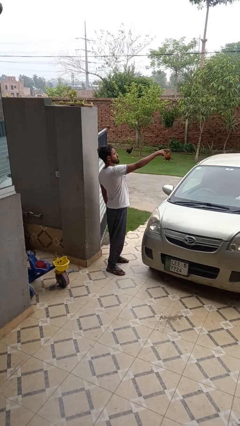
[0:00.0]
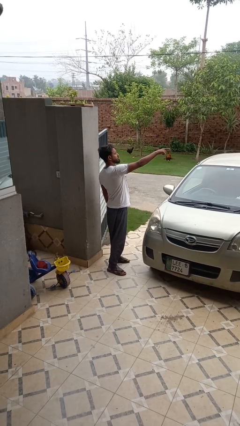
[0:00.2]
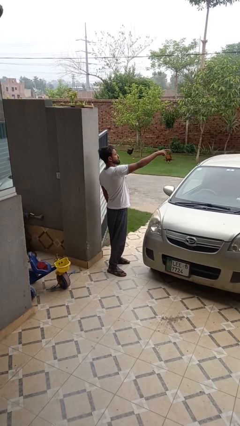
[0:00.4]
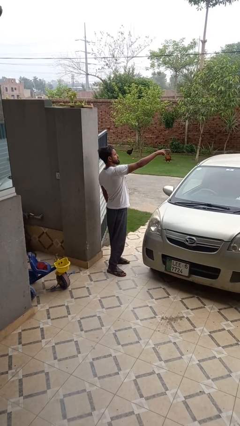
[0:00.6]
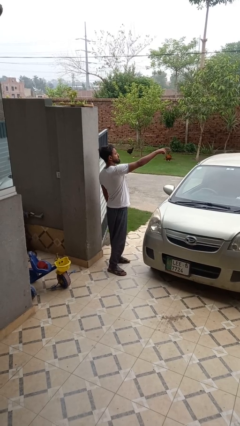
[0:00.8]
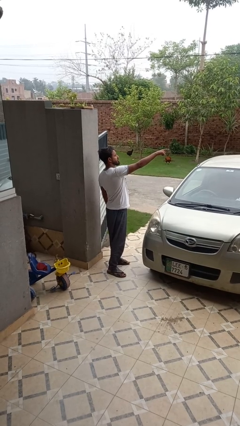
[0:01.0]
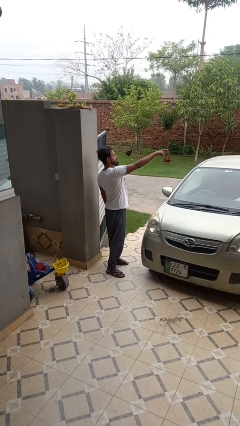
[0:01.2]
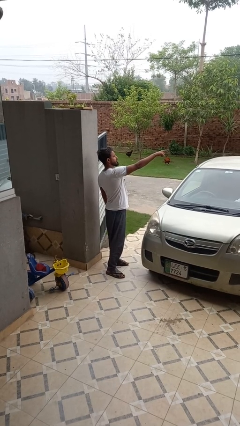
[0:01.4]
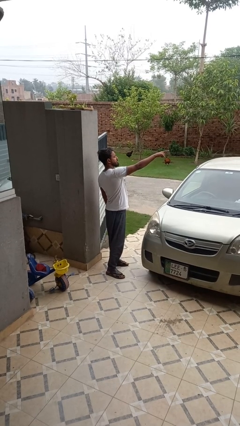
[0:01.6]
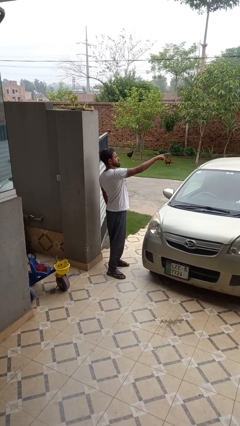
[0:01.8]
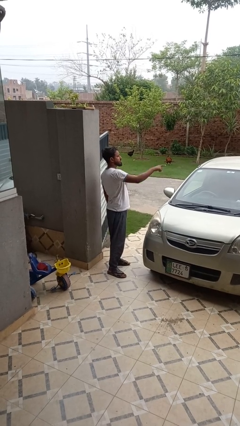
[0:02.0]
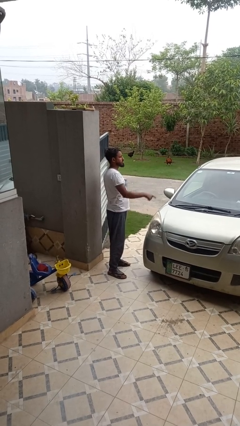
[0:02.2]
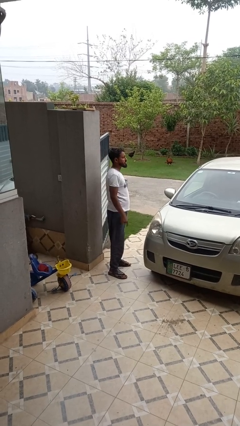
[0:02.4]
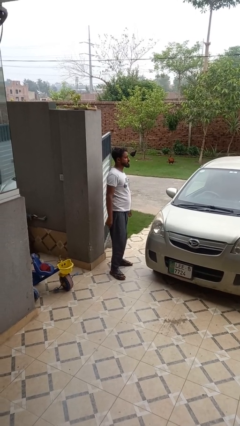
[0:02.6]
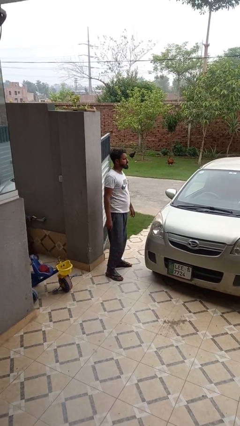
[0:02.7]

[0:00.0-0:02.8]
person points at person

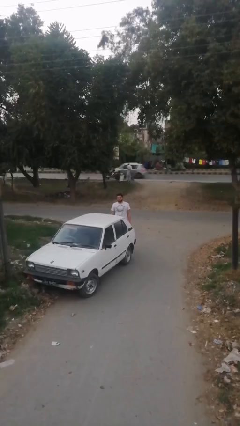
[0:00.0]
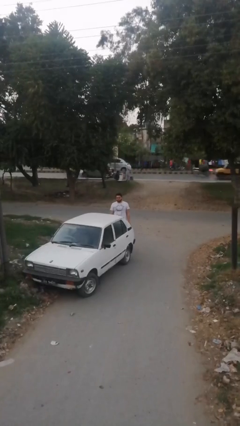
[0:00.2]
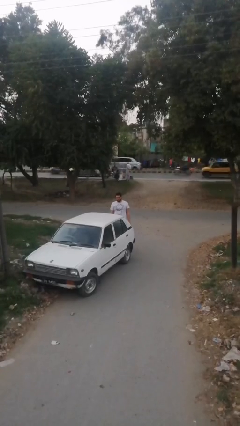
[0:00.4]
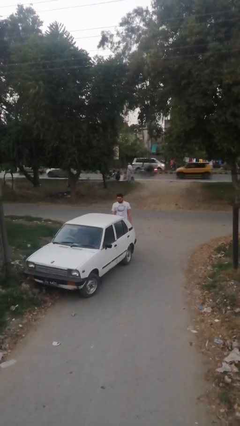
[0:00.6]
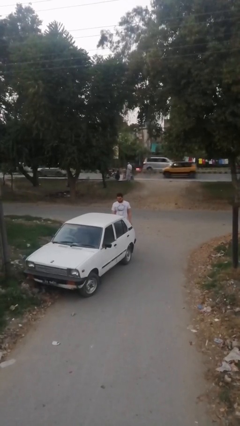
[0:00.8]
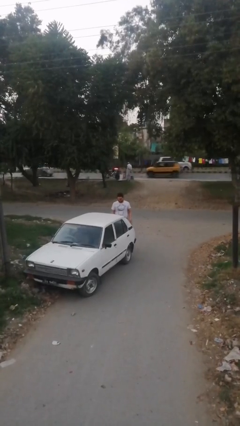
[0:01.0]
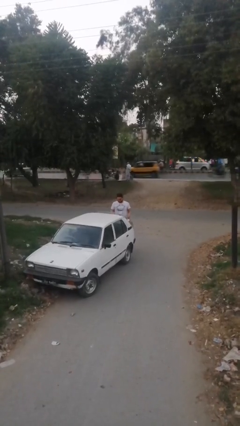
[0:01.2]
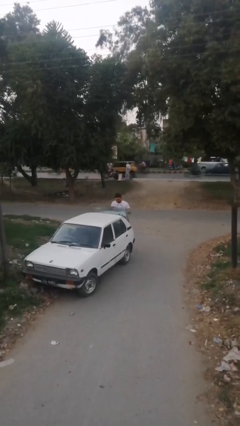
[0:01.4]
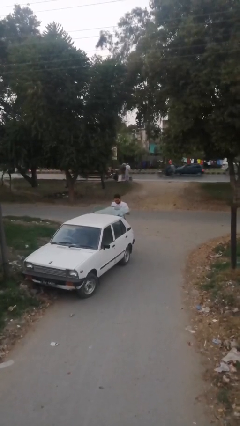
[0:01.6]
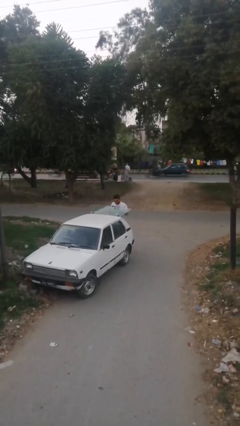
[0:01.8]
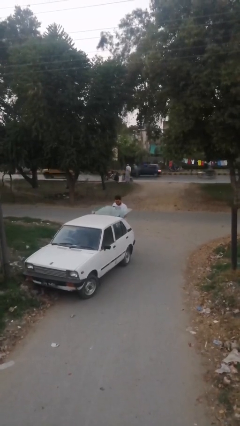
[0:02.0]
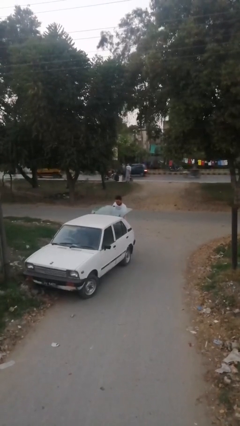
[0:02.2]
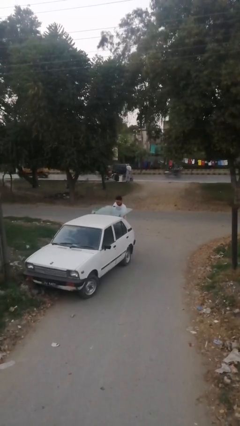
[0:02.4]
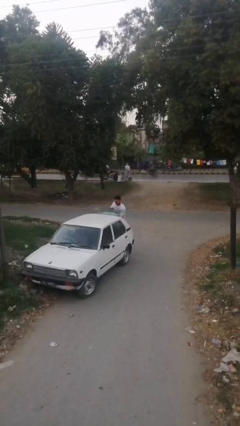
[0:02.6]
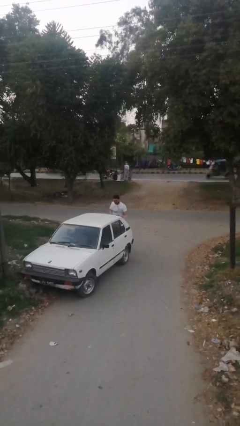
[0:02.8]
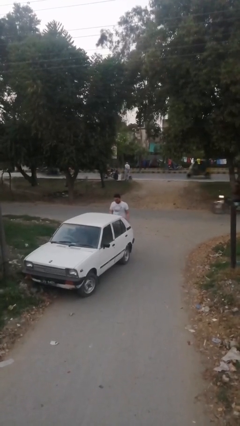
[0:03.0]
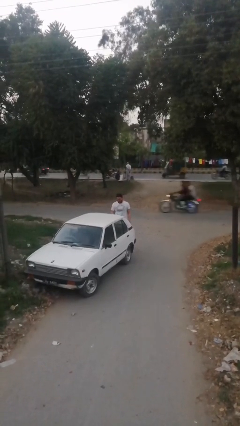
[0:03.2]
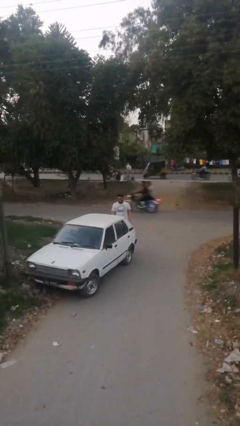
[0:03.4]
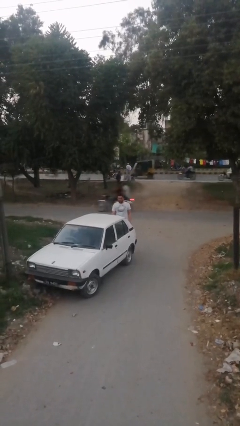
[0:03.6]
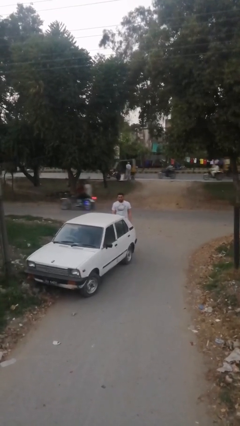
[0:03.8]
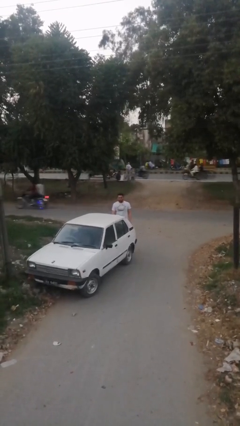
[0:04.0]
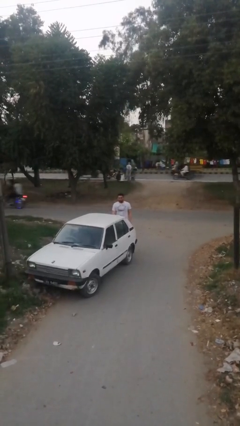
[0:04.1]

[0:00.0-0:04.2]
person loads car

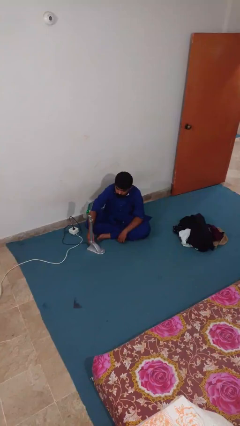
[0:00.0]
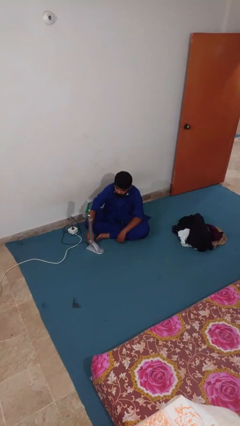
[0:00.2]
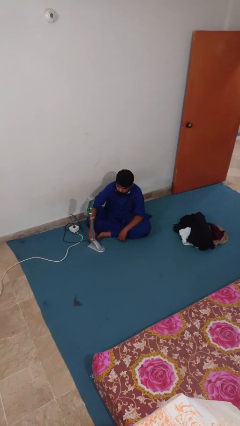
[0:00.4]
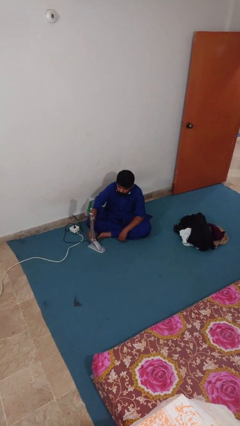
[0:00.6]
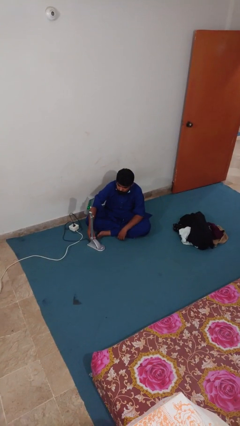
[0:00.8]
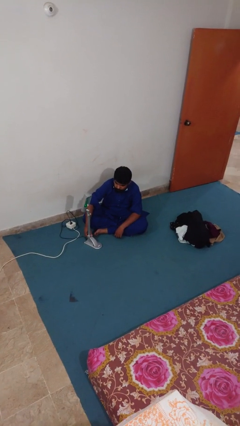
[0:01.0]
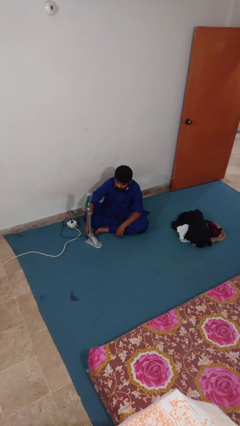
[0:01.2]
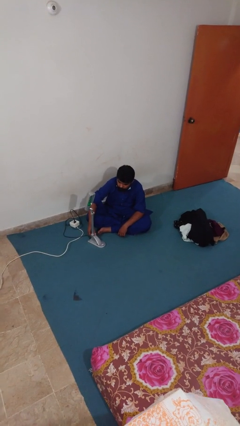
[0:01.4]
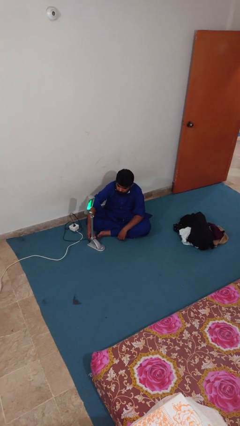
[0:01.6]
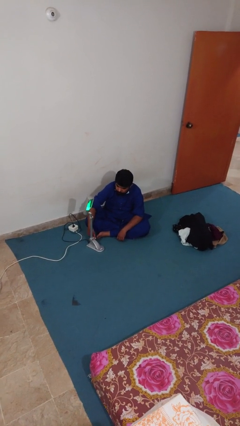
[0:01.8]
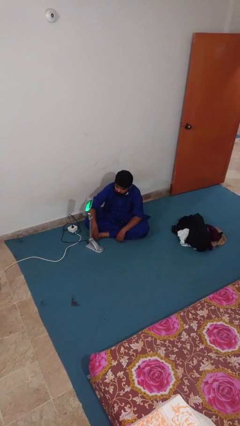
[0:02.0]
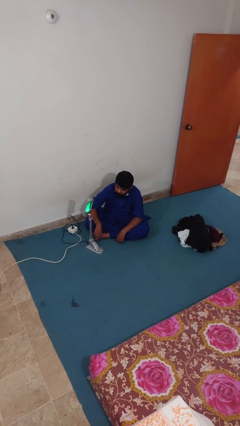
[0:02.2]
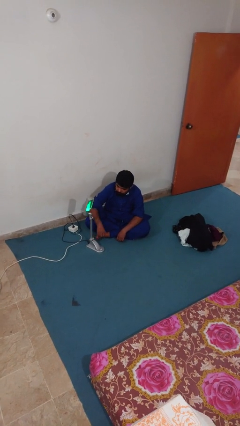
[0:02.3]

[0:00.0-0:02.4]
person turns on lamp

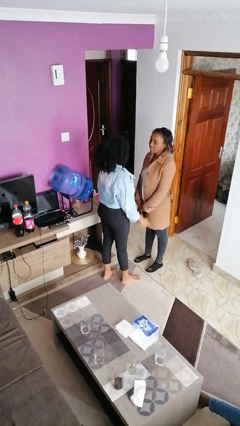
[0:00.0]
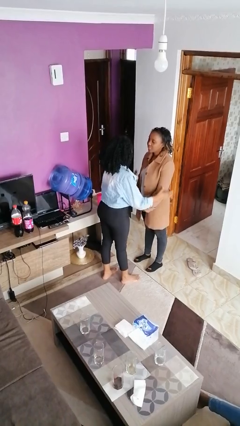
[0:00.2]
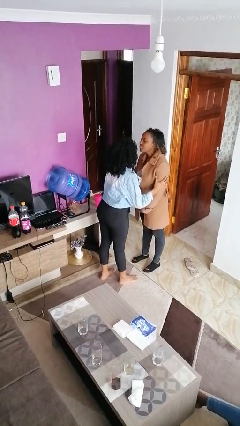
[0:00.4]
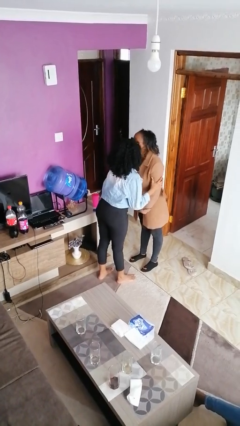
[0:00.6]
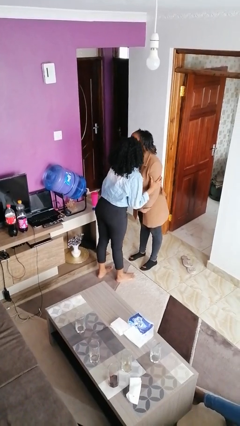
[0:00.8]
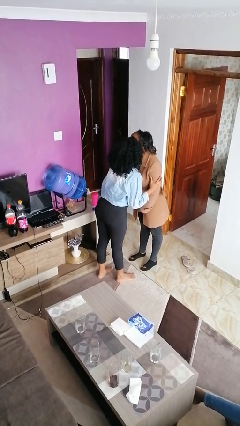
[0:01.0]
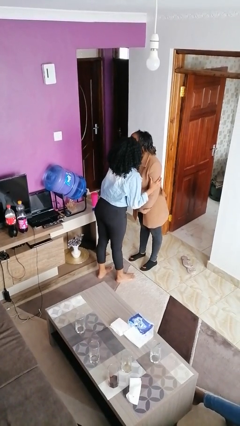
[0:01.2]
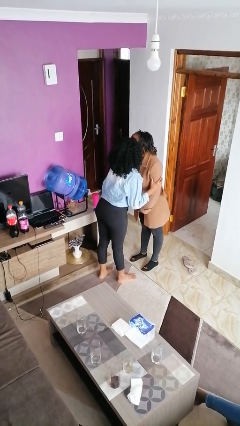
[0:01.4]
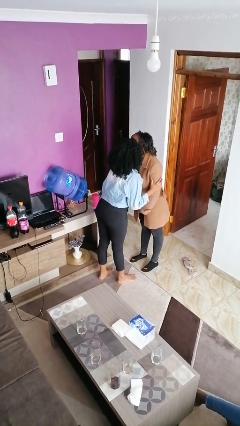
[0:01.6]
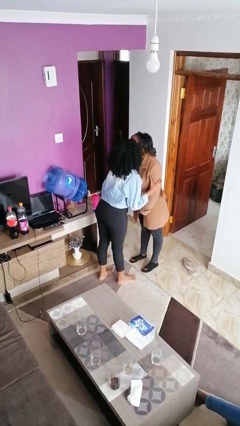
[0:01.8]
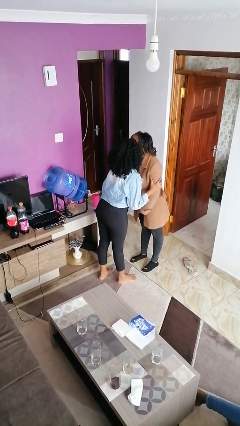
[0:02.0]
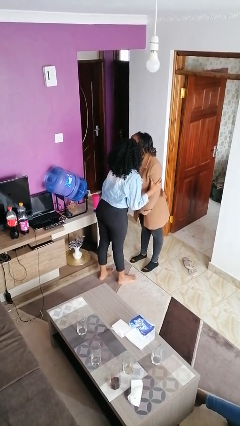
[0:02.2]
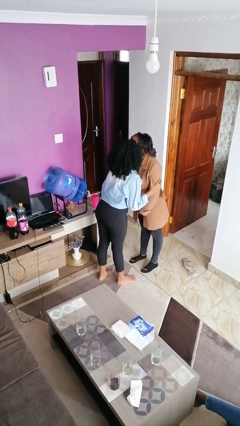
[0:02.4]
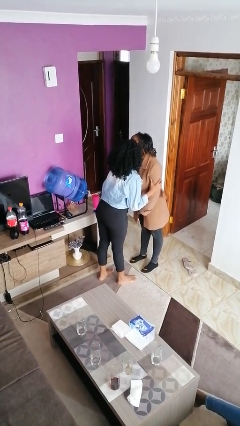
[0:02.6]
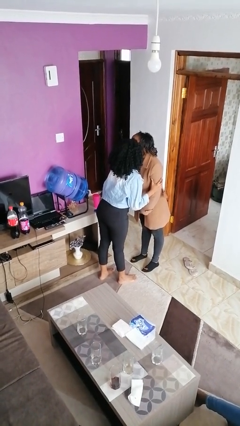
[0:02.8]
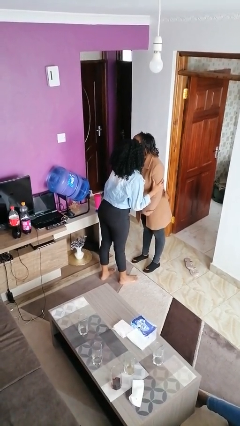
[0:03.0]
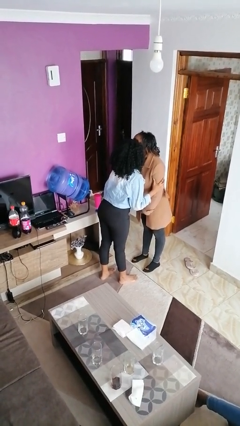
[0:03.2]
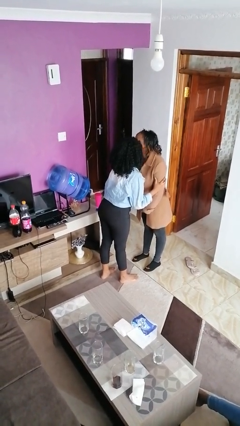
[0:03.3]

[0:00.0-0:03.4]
person kisses cheek of person

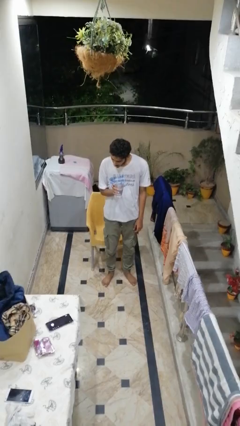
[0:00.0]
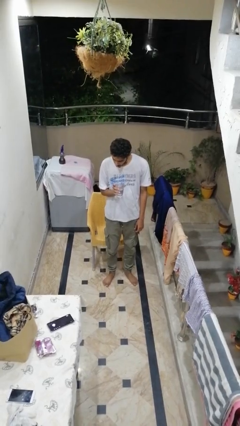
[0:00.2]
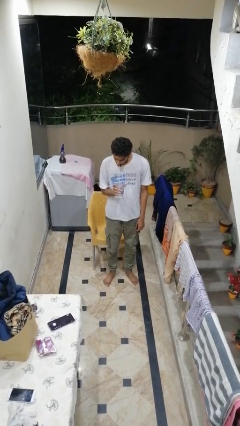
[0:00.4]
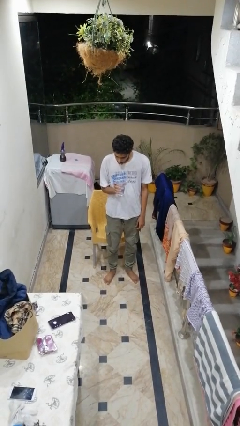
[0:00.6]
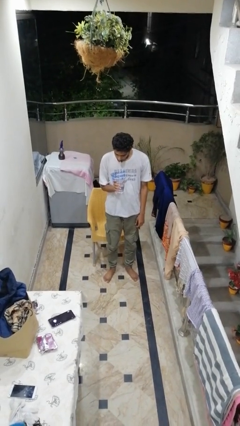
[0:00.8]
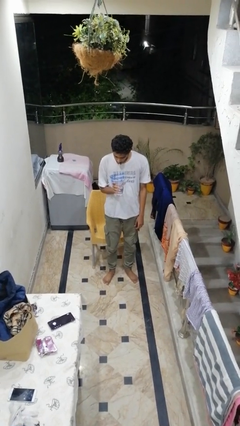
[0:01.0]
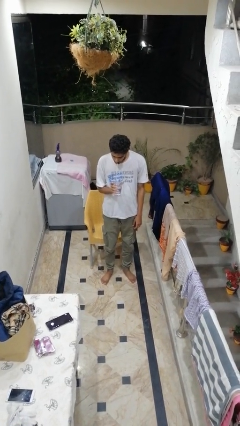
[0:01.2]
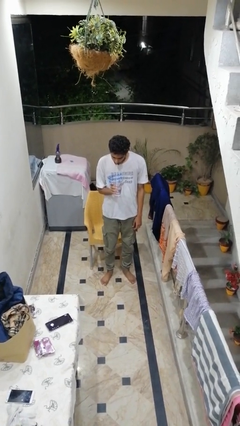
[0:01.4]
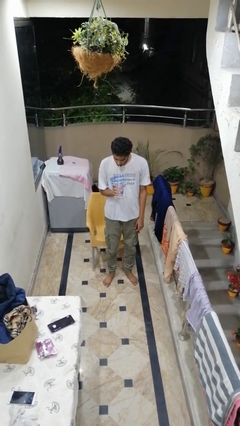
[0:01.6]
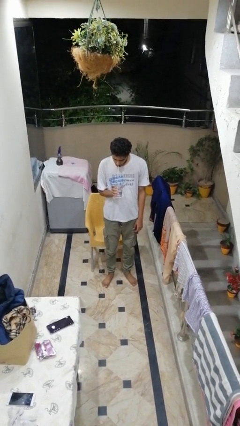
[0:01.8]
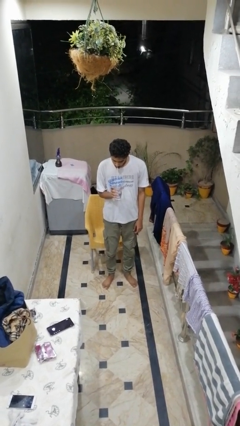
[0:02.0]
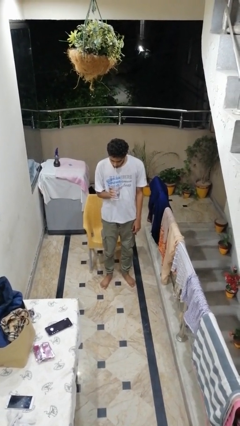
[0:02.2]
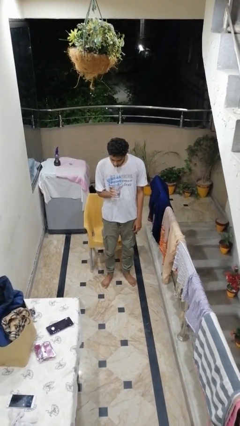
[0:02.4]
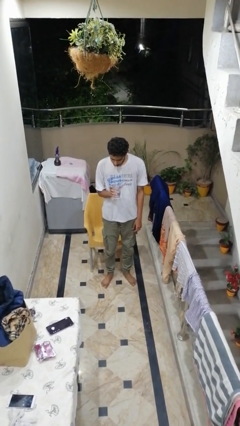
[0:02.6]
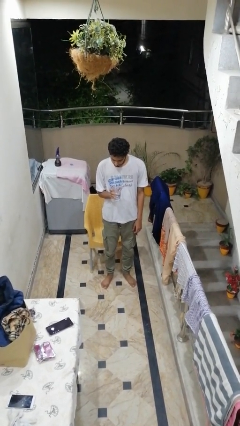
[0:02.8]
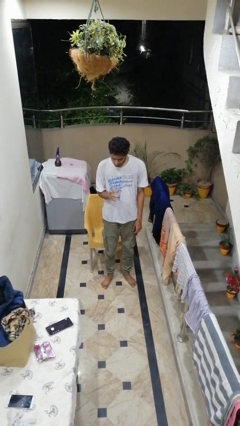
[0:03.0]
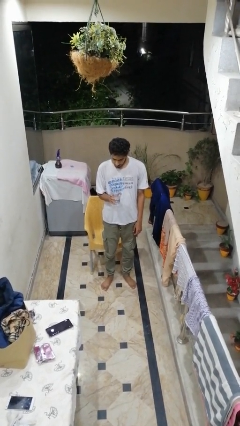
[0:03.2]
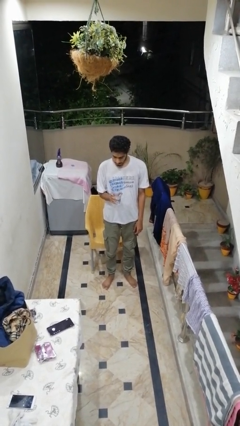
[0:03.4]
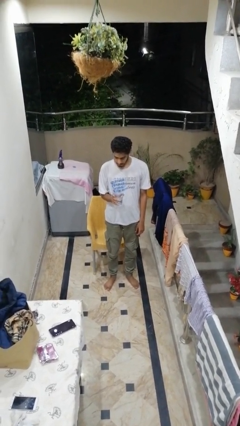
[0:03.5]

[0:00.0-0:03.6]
person drinks from straw

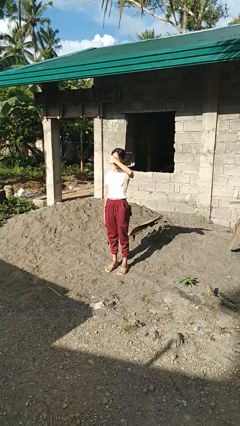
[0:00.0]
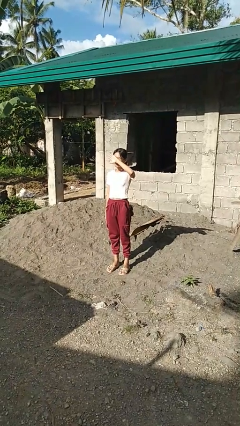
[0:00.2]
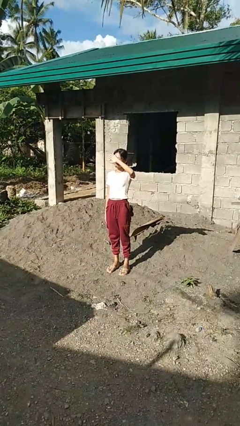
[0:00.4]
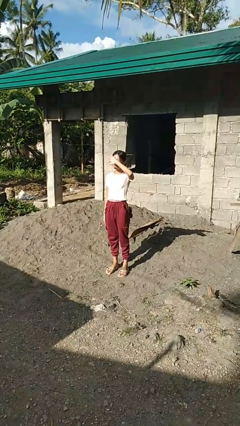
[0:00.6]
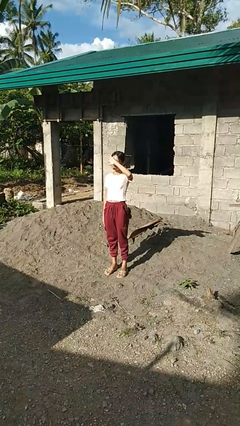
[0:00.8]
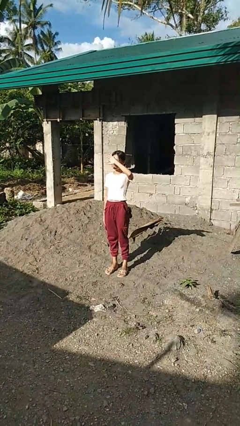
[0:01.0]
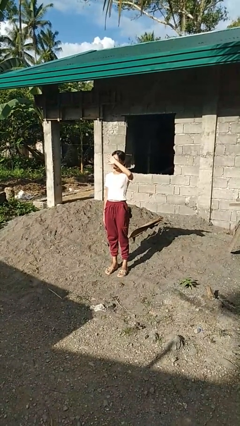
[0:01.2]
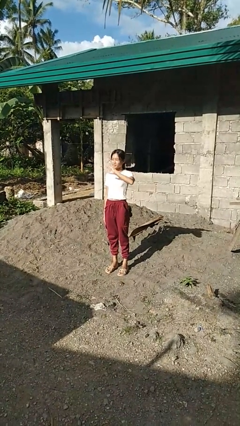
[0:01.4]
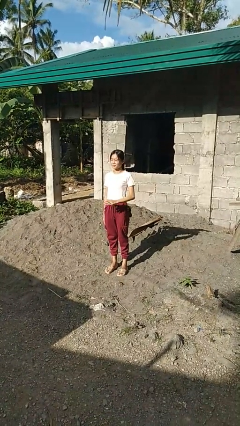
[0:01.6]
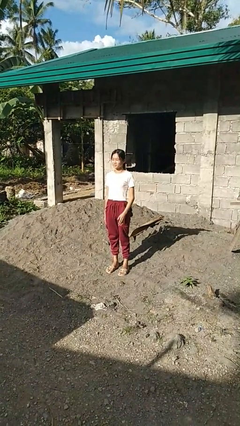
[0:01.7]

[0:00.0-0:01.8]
person shades eyes
